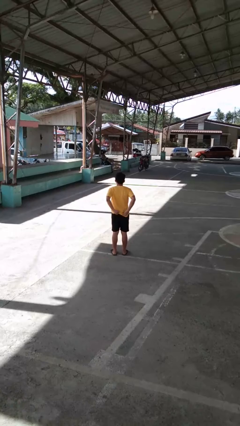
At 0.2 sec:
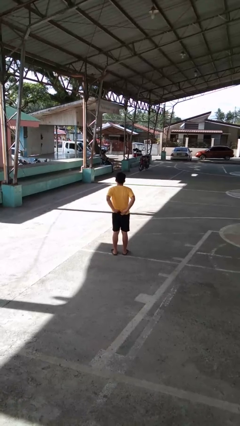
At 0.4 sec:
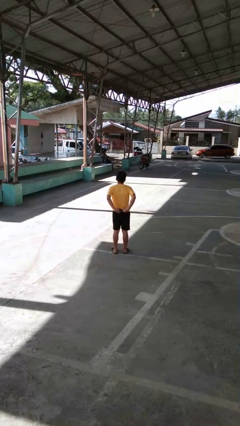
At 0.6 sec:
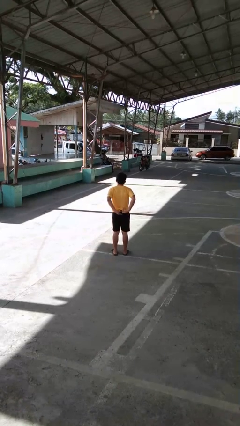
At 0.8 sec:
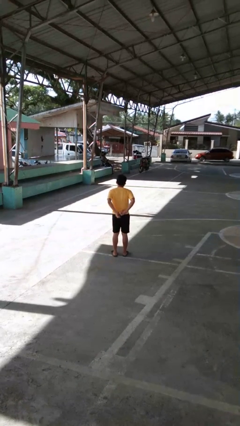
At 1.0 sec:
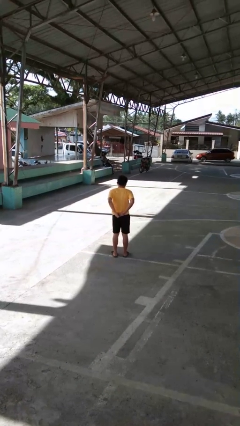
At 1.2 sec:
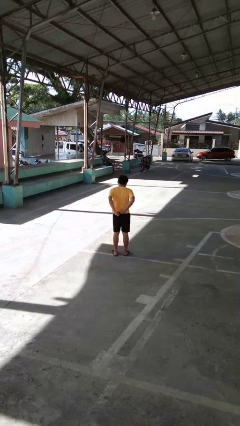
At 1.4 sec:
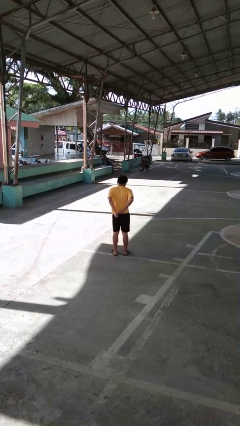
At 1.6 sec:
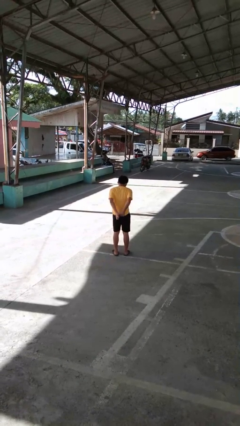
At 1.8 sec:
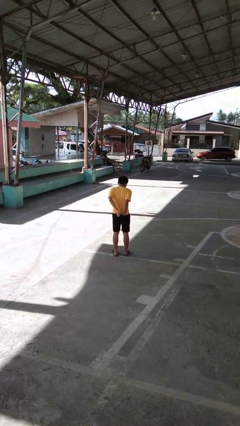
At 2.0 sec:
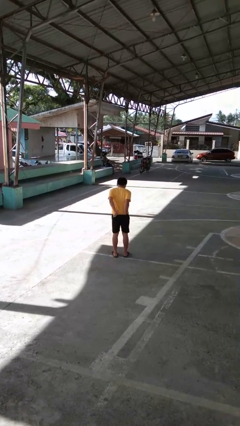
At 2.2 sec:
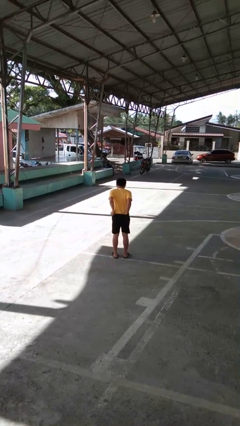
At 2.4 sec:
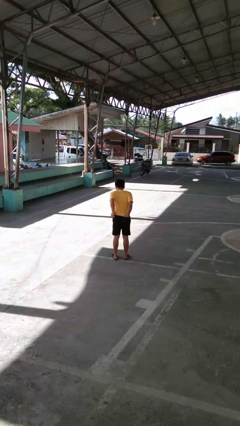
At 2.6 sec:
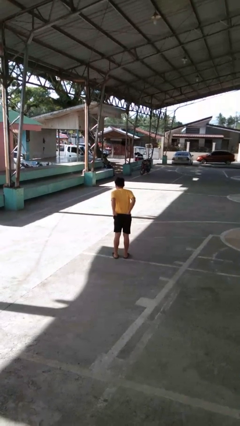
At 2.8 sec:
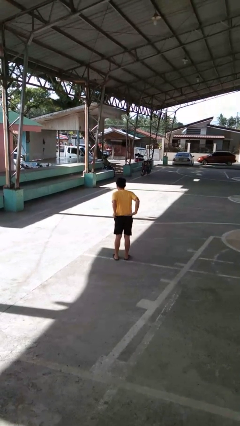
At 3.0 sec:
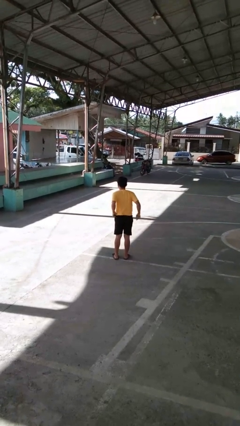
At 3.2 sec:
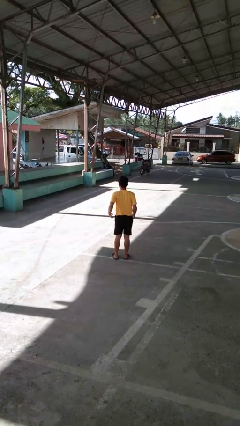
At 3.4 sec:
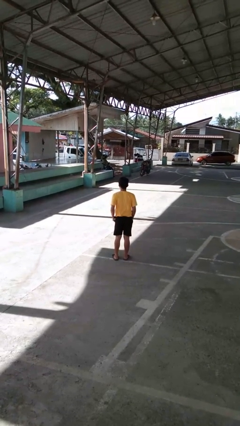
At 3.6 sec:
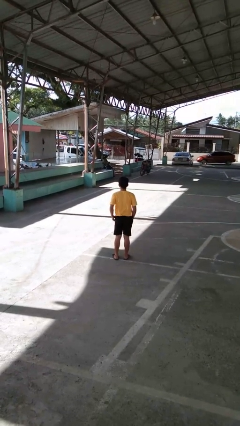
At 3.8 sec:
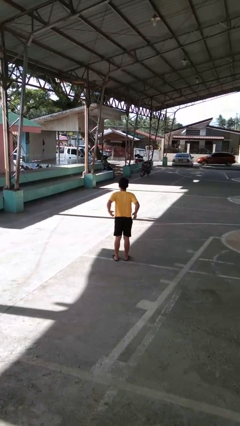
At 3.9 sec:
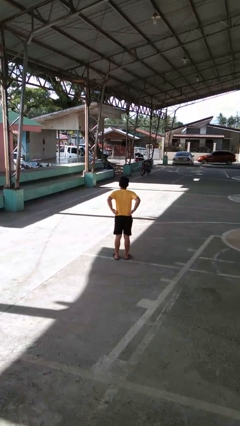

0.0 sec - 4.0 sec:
person tucks in shirt

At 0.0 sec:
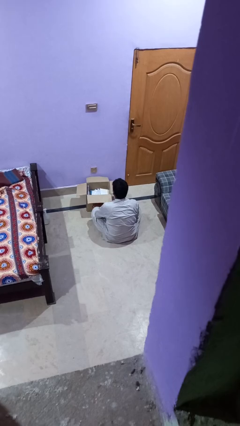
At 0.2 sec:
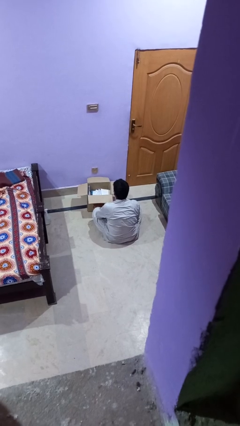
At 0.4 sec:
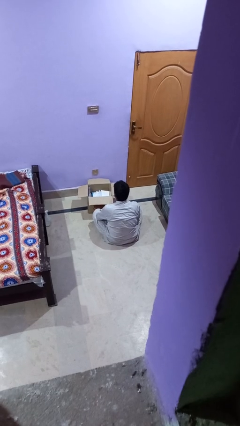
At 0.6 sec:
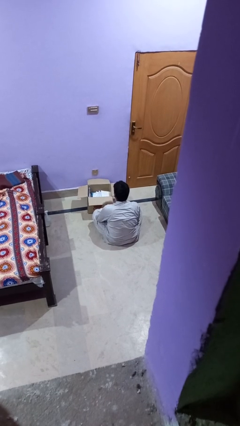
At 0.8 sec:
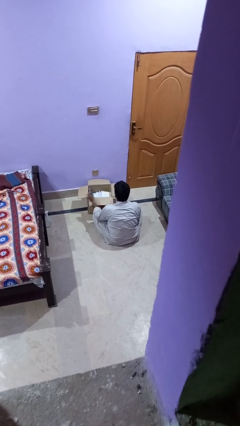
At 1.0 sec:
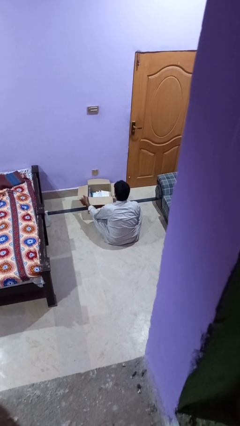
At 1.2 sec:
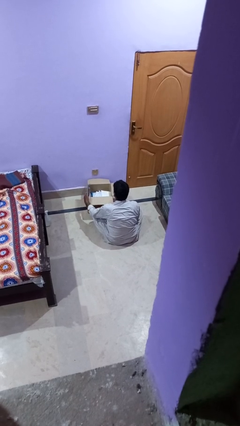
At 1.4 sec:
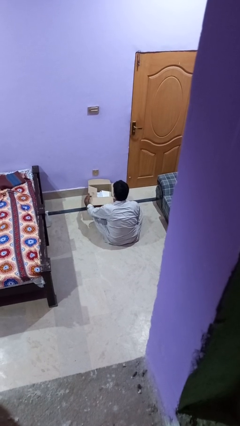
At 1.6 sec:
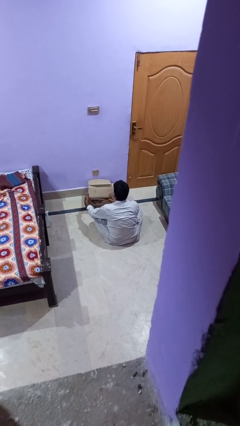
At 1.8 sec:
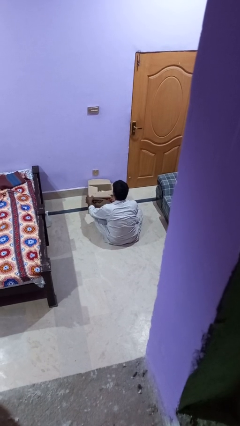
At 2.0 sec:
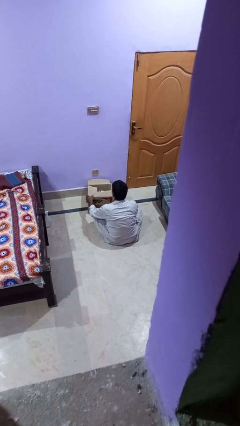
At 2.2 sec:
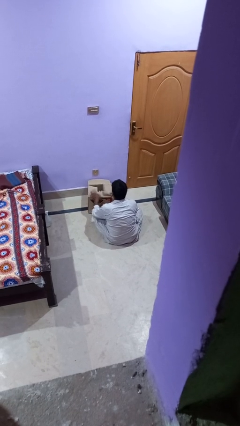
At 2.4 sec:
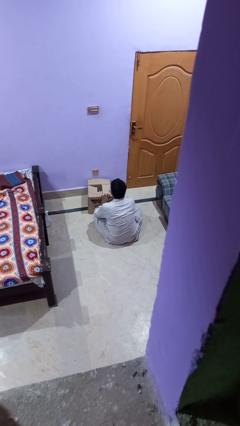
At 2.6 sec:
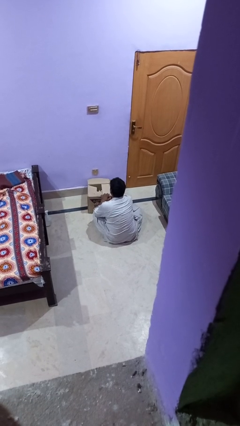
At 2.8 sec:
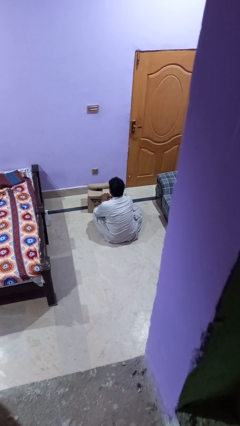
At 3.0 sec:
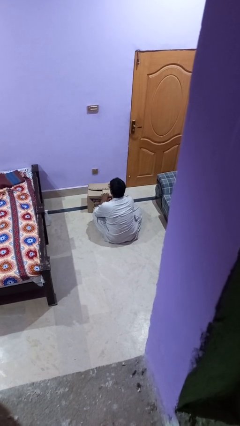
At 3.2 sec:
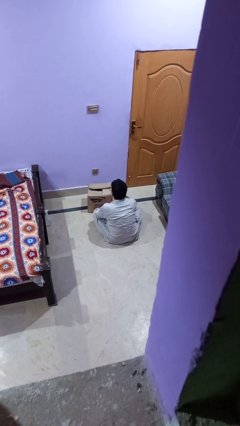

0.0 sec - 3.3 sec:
person closes box

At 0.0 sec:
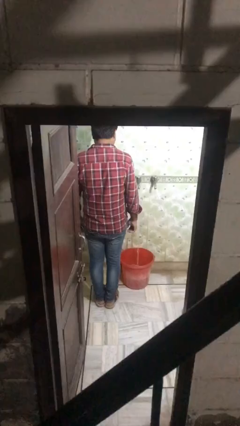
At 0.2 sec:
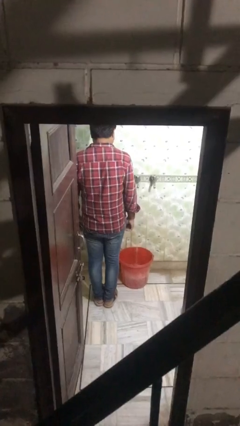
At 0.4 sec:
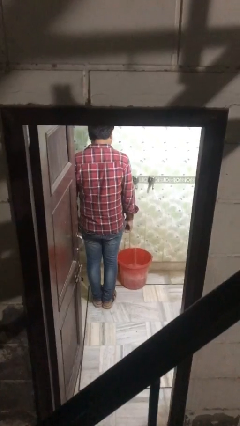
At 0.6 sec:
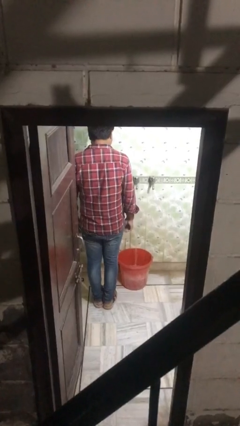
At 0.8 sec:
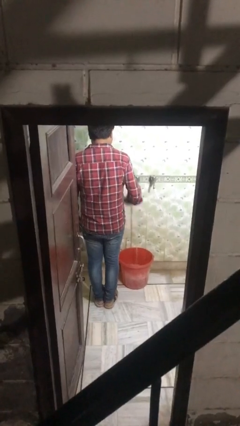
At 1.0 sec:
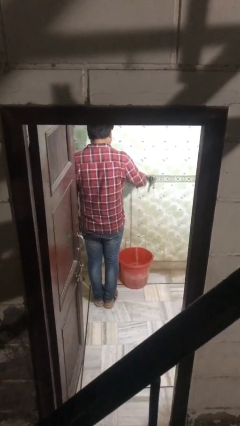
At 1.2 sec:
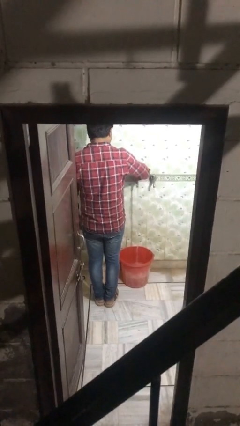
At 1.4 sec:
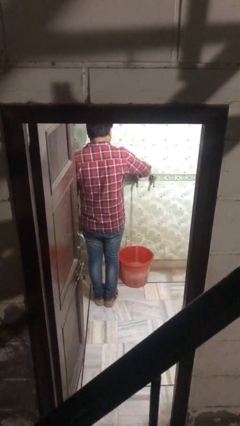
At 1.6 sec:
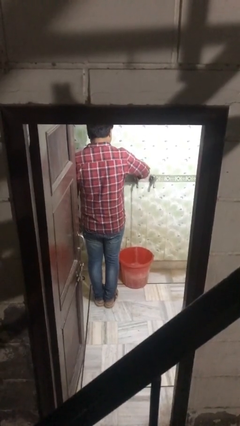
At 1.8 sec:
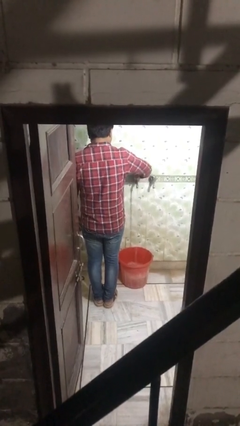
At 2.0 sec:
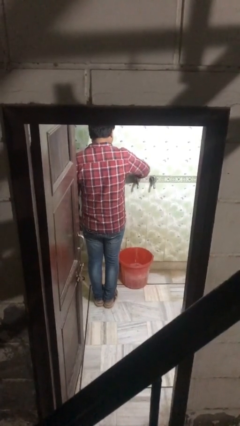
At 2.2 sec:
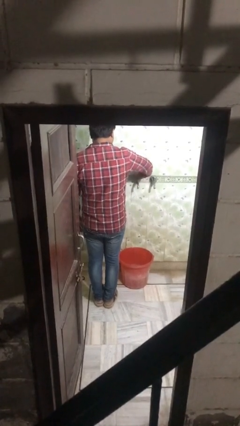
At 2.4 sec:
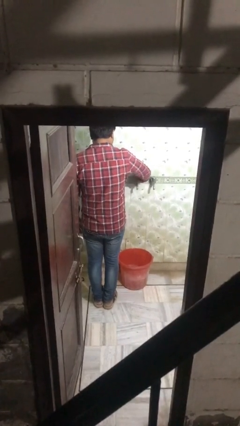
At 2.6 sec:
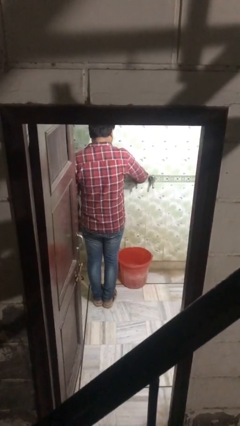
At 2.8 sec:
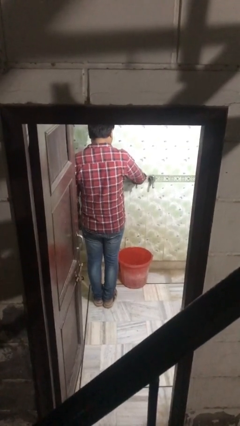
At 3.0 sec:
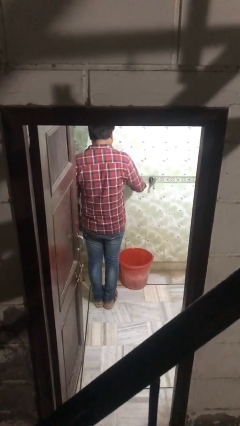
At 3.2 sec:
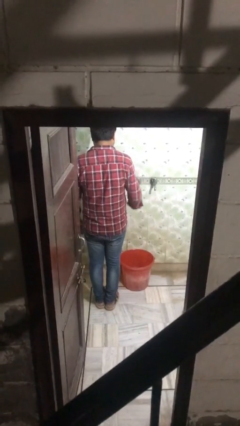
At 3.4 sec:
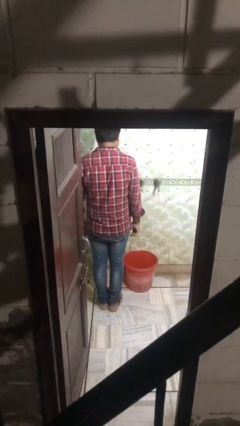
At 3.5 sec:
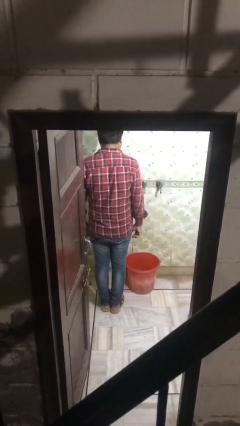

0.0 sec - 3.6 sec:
person turns off faucet

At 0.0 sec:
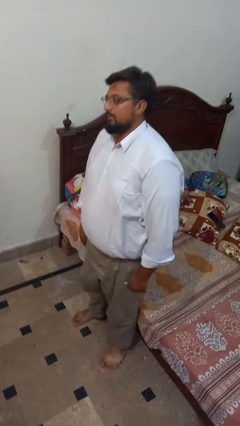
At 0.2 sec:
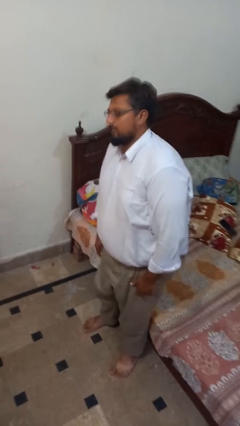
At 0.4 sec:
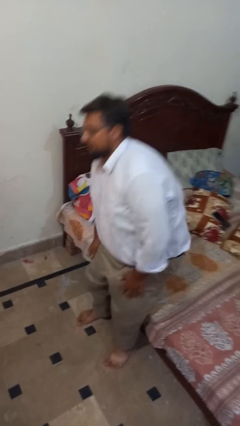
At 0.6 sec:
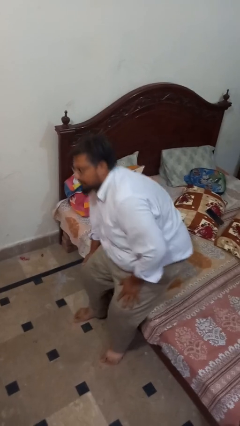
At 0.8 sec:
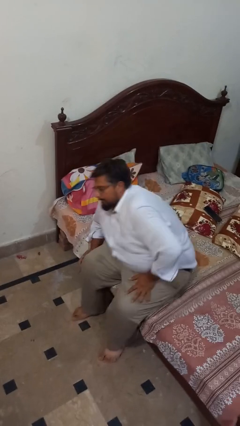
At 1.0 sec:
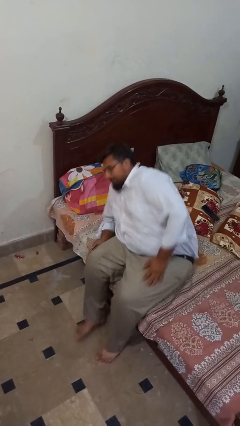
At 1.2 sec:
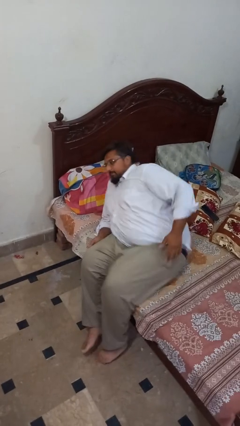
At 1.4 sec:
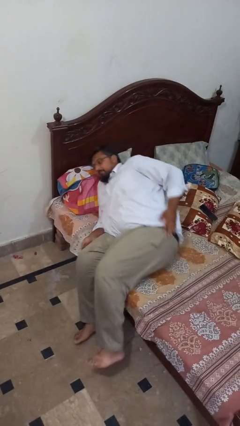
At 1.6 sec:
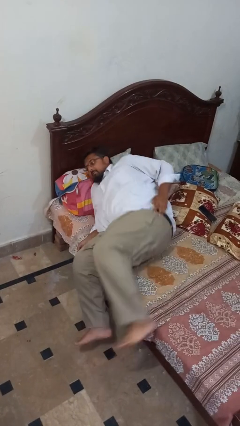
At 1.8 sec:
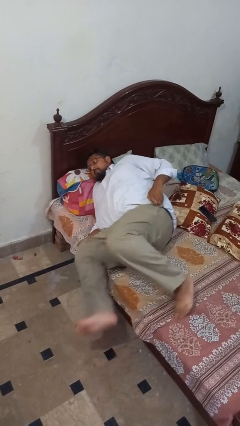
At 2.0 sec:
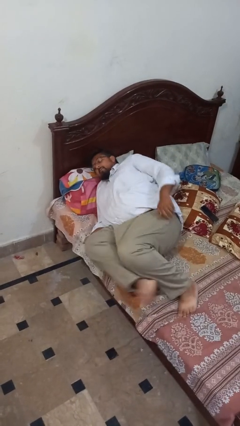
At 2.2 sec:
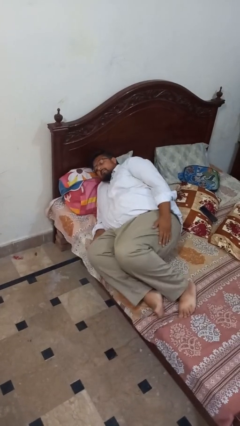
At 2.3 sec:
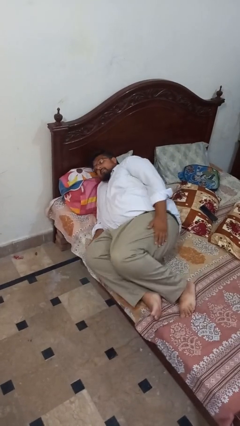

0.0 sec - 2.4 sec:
person lies down on bed

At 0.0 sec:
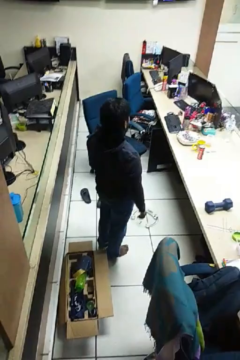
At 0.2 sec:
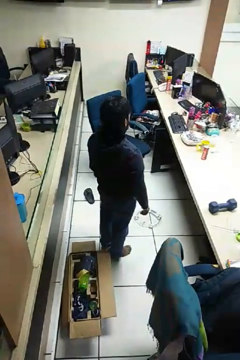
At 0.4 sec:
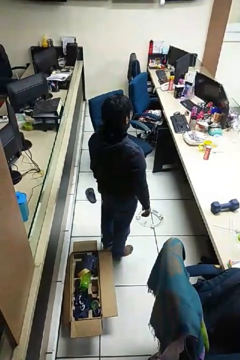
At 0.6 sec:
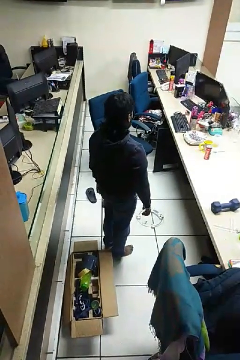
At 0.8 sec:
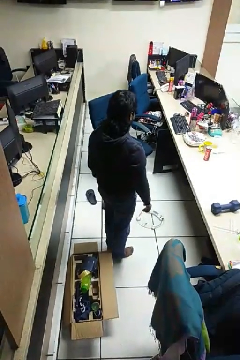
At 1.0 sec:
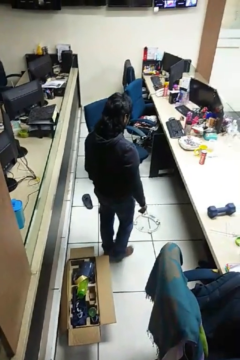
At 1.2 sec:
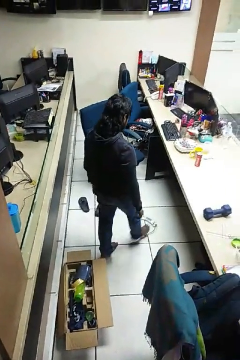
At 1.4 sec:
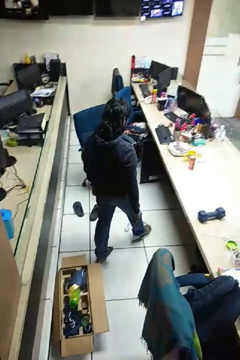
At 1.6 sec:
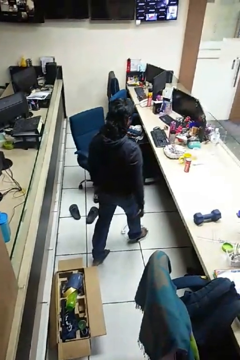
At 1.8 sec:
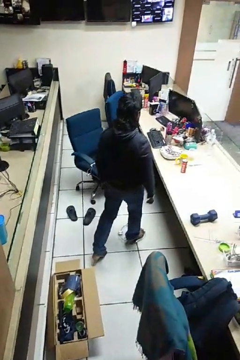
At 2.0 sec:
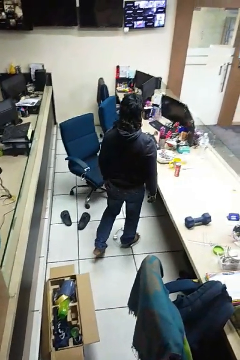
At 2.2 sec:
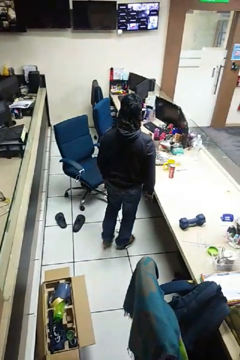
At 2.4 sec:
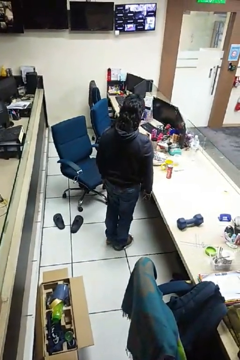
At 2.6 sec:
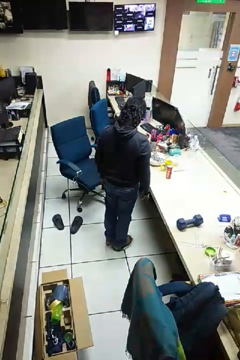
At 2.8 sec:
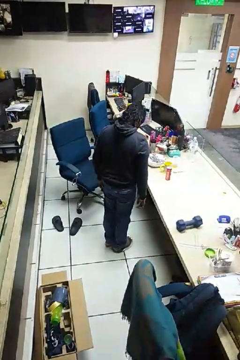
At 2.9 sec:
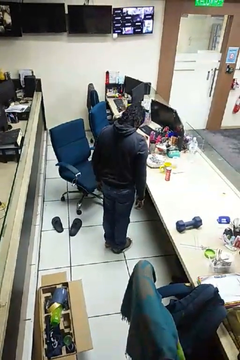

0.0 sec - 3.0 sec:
person uses bodyweight scale

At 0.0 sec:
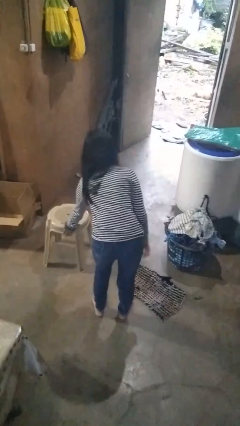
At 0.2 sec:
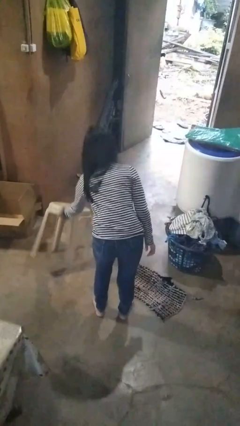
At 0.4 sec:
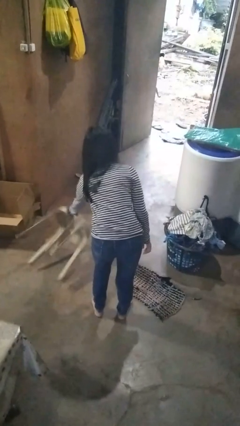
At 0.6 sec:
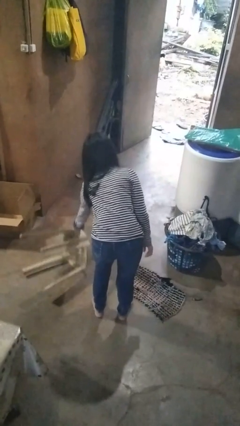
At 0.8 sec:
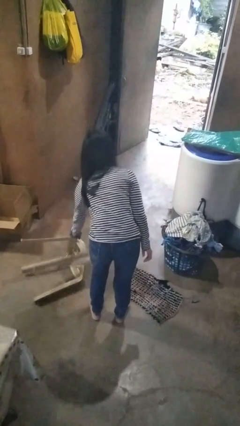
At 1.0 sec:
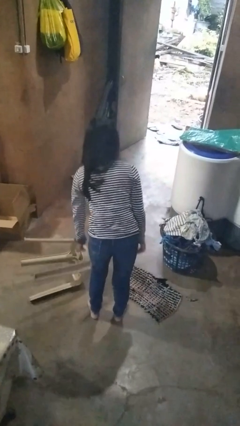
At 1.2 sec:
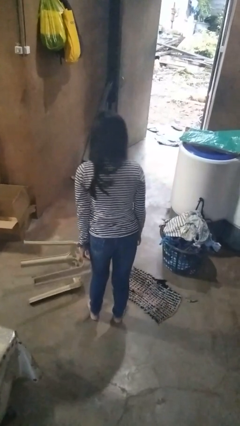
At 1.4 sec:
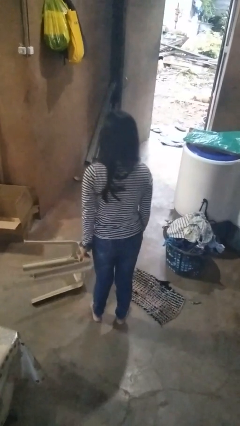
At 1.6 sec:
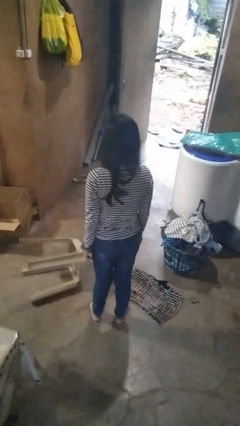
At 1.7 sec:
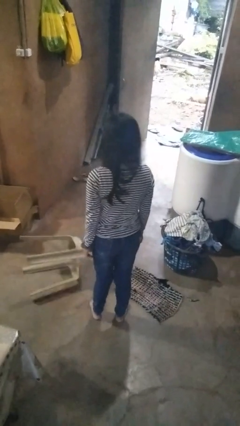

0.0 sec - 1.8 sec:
person knocks over furniture
